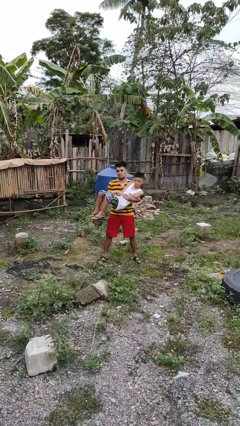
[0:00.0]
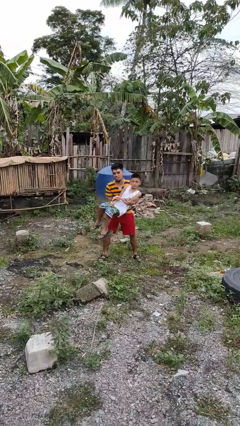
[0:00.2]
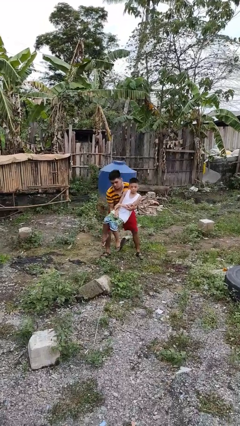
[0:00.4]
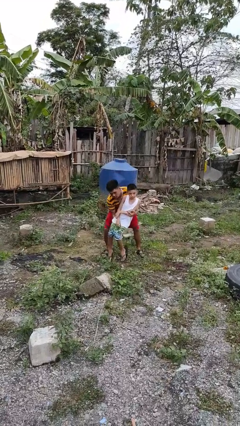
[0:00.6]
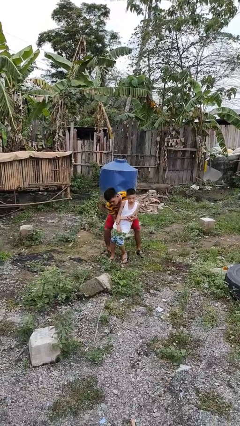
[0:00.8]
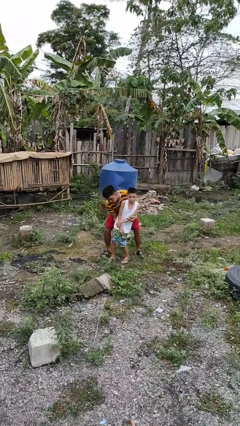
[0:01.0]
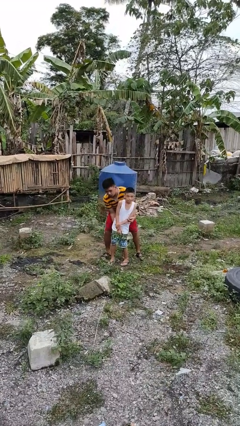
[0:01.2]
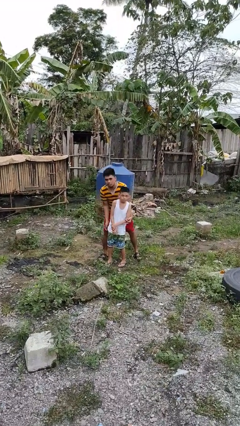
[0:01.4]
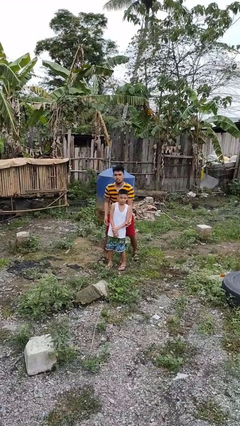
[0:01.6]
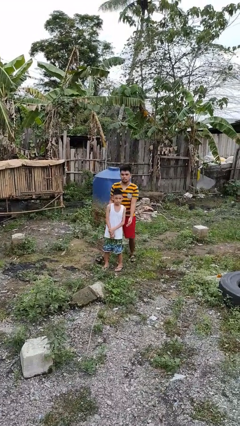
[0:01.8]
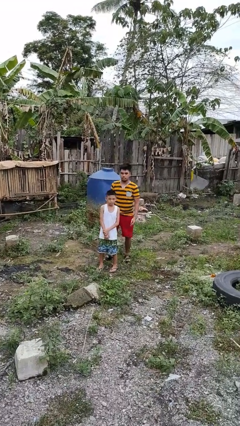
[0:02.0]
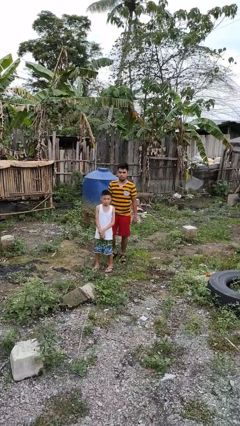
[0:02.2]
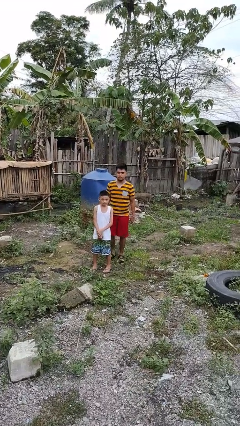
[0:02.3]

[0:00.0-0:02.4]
person puts down person

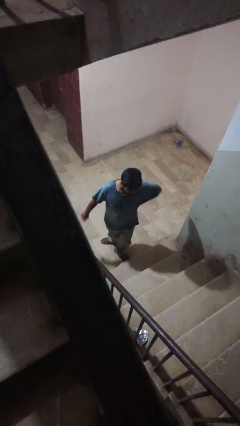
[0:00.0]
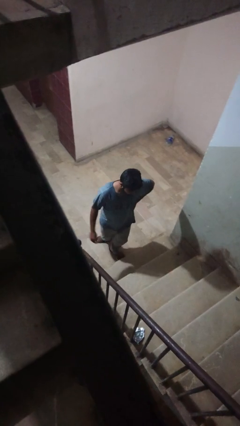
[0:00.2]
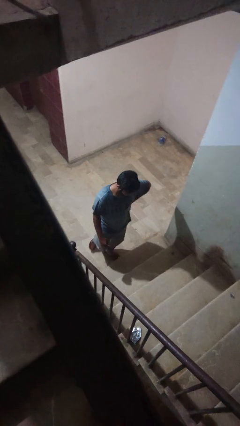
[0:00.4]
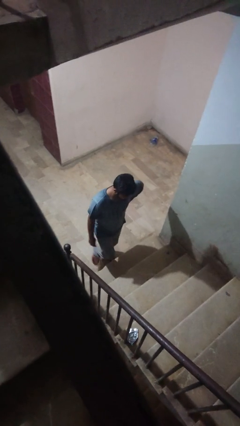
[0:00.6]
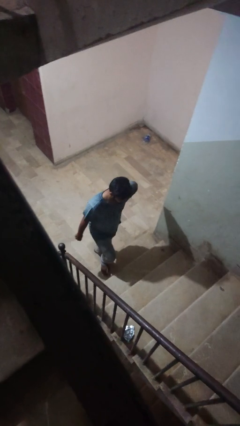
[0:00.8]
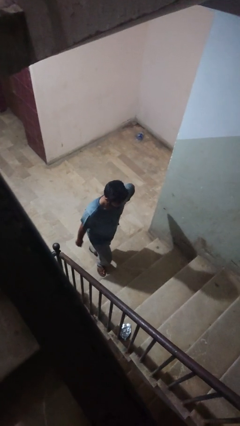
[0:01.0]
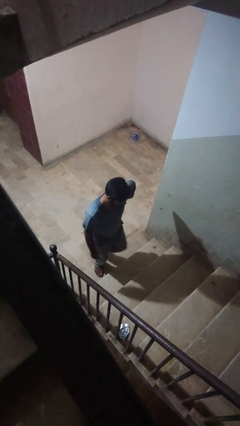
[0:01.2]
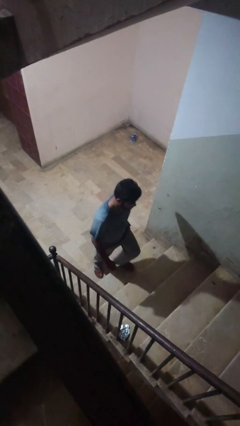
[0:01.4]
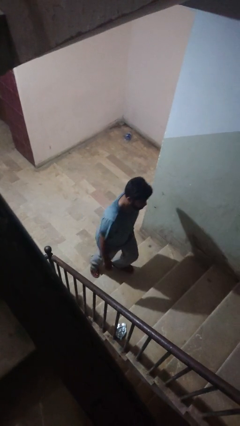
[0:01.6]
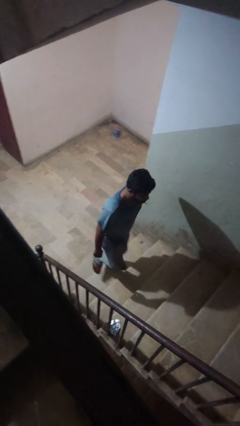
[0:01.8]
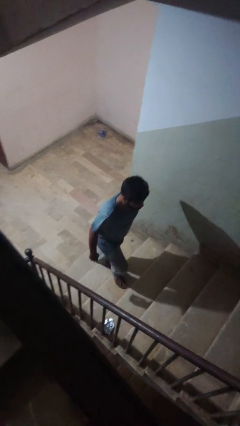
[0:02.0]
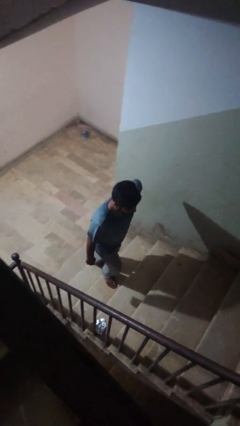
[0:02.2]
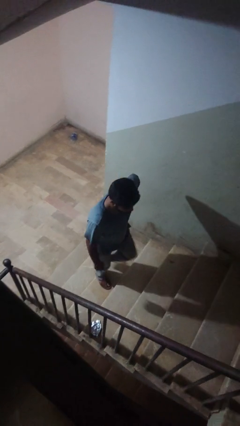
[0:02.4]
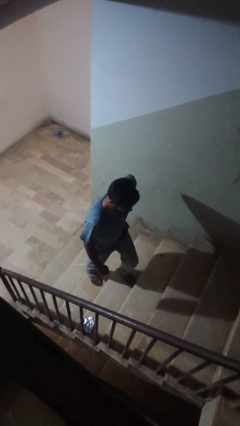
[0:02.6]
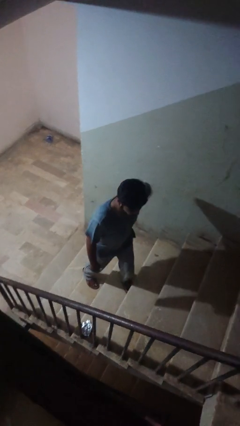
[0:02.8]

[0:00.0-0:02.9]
person climbs up stairs

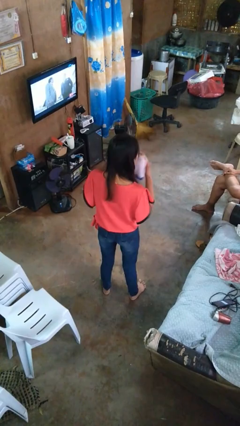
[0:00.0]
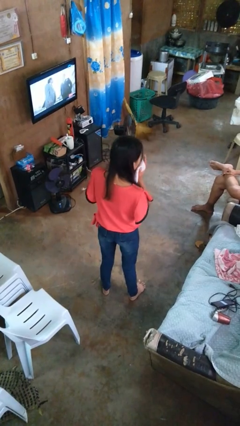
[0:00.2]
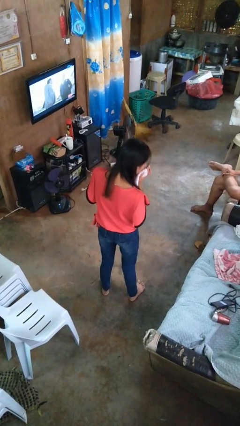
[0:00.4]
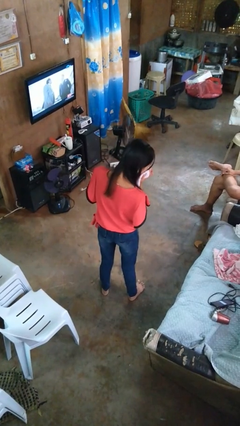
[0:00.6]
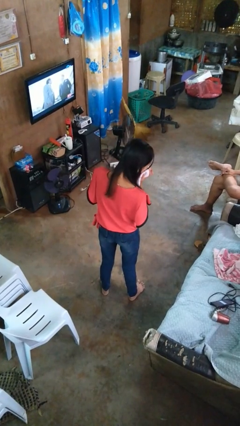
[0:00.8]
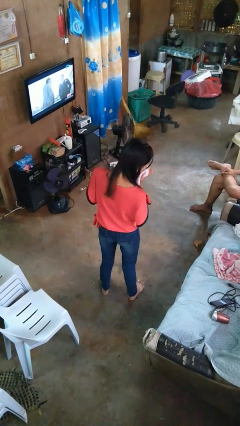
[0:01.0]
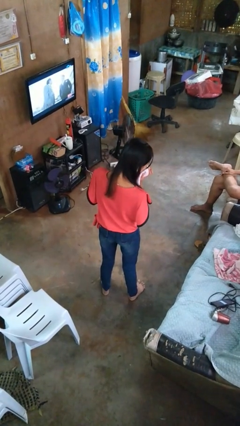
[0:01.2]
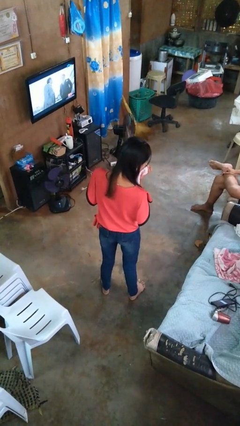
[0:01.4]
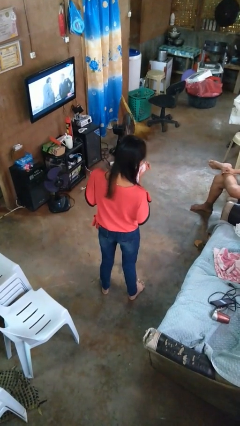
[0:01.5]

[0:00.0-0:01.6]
person blows nose

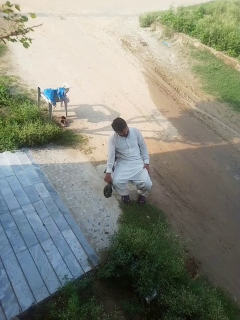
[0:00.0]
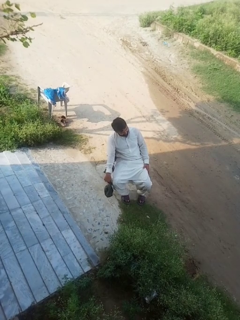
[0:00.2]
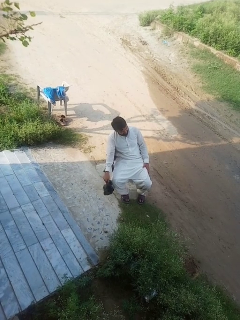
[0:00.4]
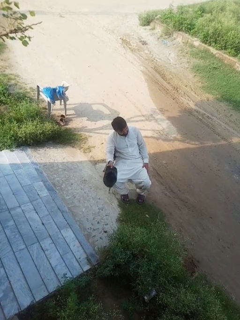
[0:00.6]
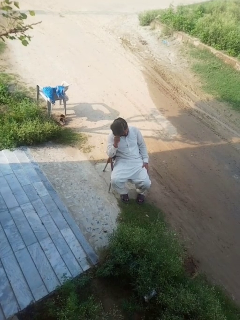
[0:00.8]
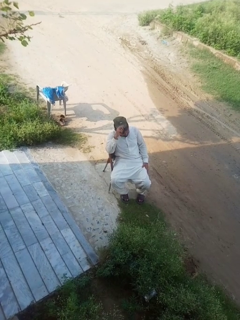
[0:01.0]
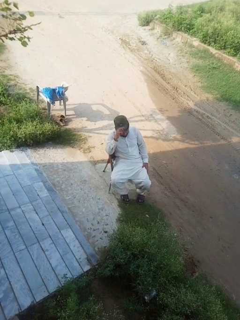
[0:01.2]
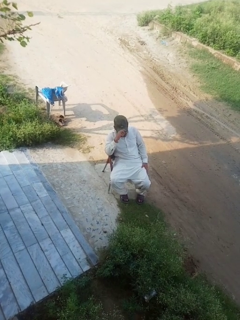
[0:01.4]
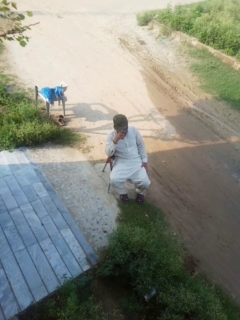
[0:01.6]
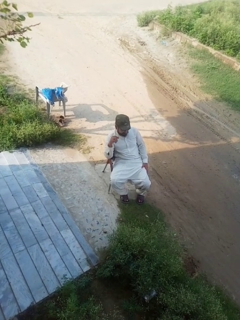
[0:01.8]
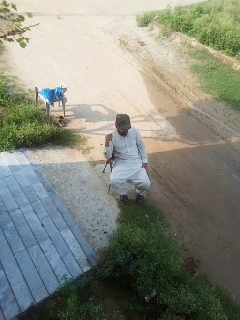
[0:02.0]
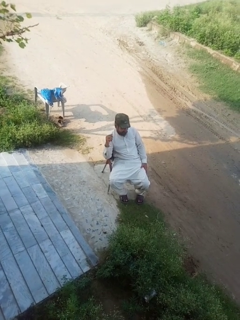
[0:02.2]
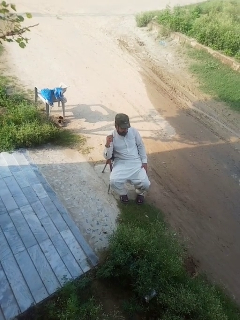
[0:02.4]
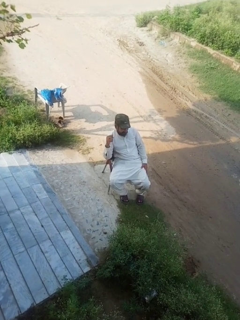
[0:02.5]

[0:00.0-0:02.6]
person puts on hat

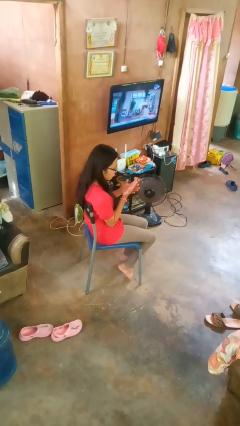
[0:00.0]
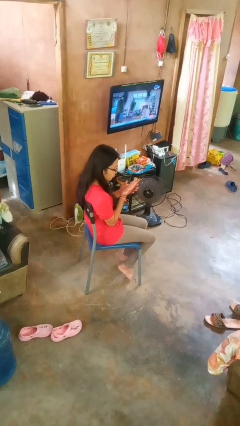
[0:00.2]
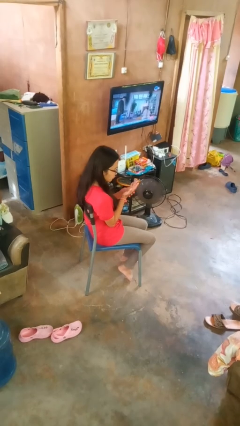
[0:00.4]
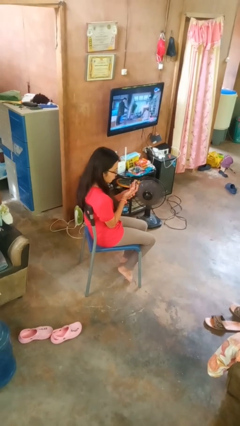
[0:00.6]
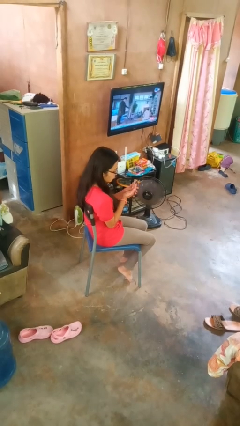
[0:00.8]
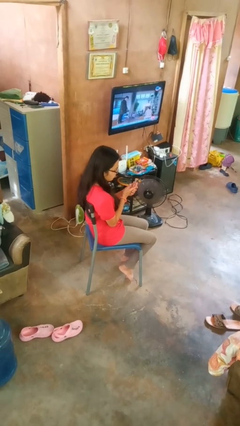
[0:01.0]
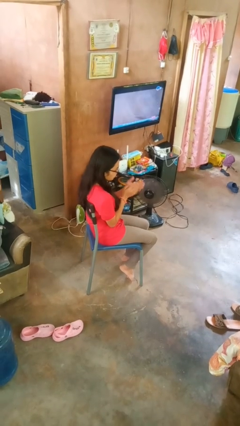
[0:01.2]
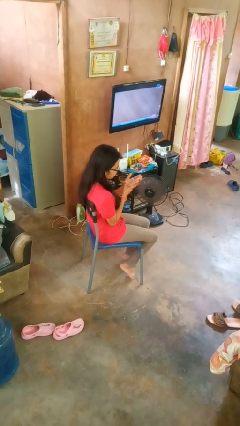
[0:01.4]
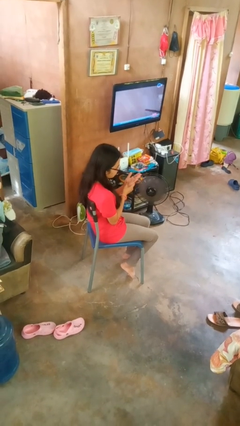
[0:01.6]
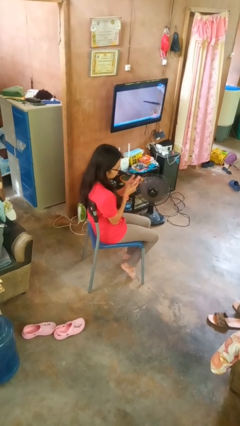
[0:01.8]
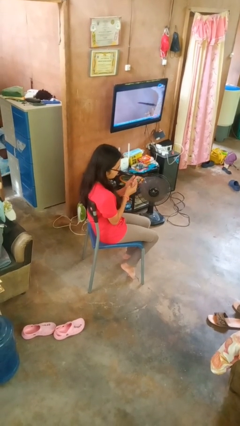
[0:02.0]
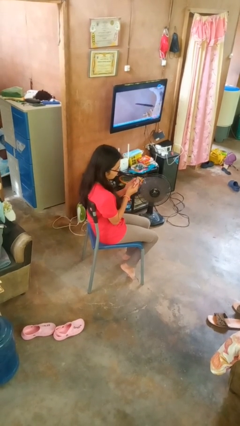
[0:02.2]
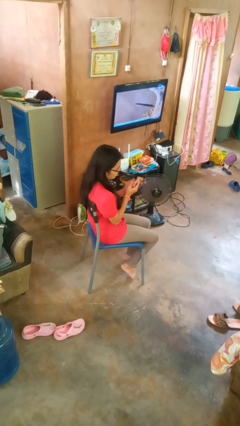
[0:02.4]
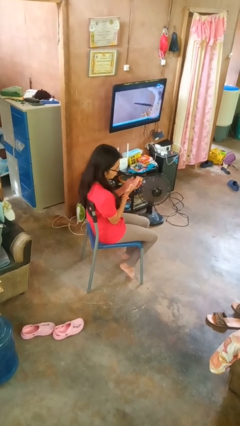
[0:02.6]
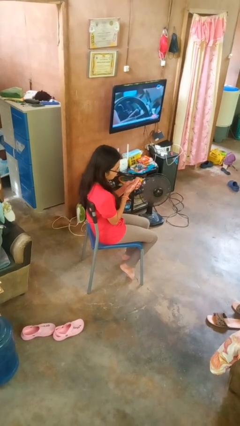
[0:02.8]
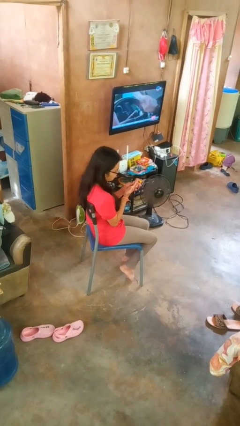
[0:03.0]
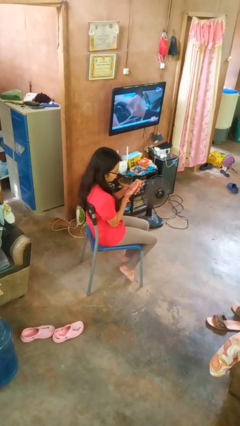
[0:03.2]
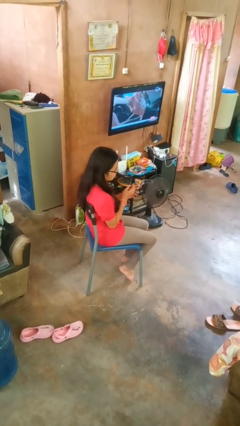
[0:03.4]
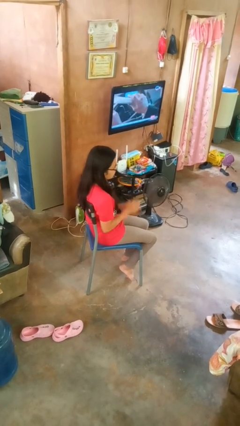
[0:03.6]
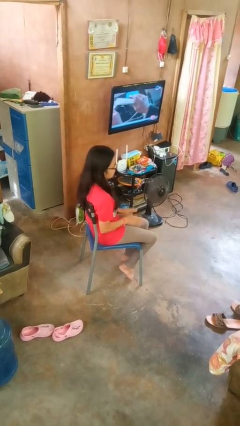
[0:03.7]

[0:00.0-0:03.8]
person looks at hands in lap

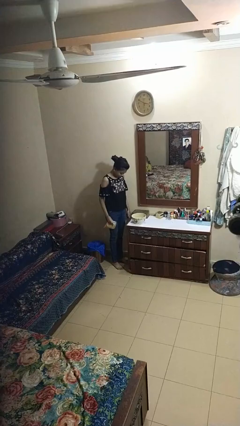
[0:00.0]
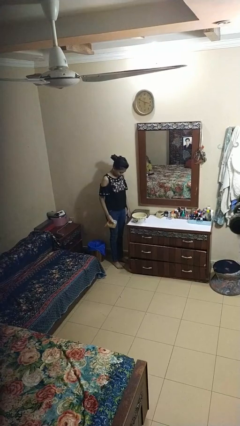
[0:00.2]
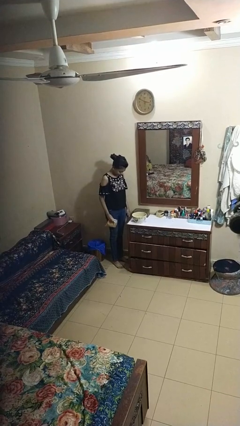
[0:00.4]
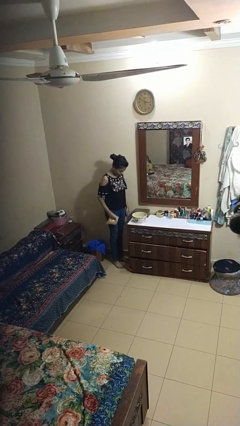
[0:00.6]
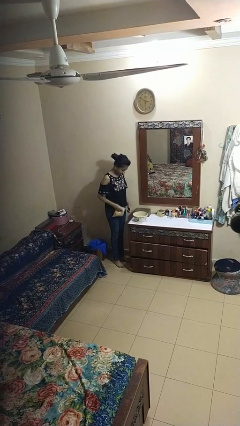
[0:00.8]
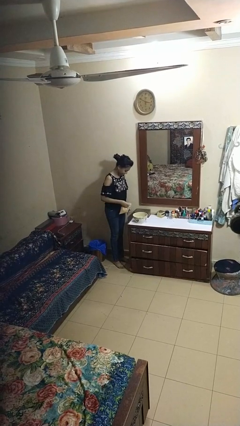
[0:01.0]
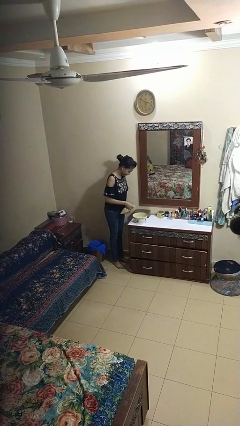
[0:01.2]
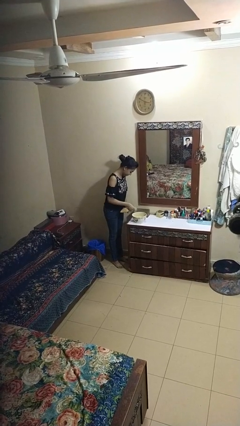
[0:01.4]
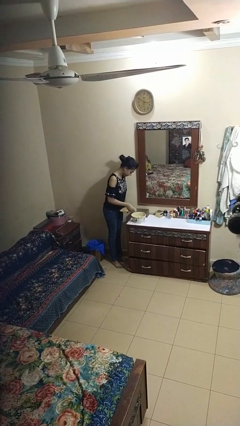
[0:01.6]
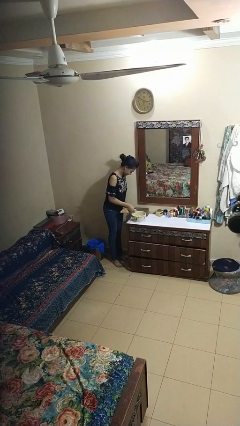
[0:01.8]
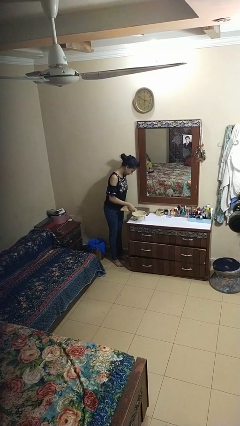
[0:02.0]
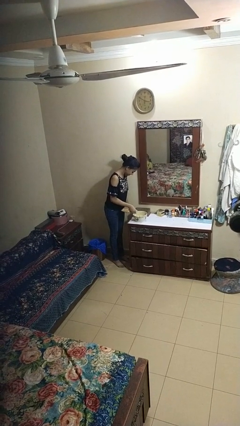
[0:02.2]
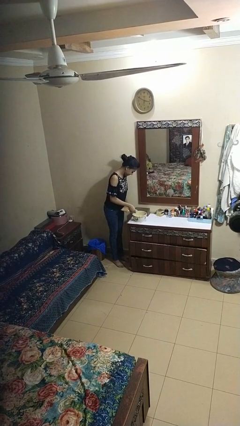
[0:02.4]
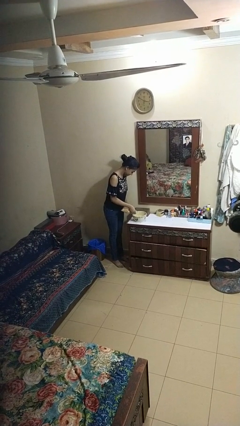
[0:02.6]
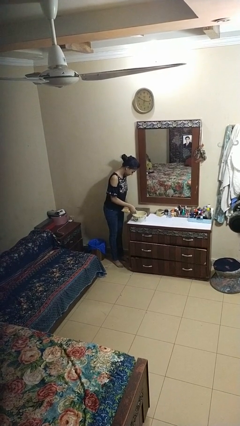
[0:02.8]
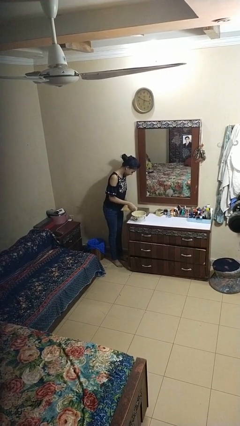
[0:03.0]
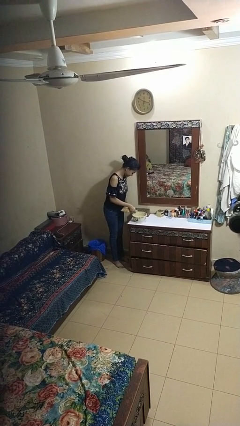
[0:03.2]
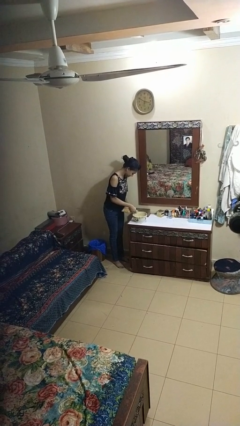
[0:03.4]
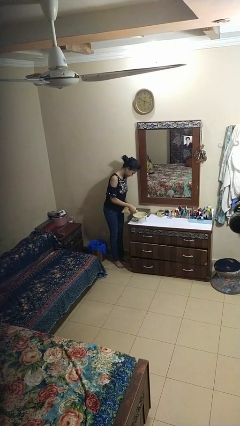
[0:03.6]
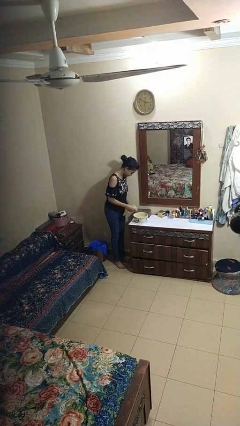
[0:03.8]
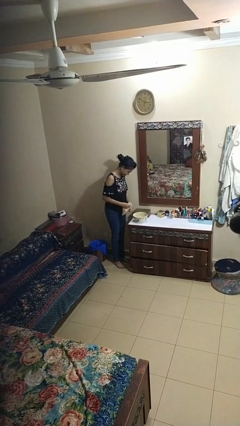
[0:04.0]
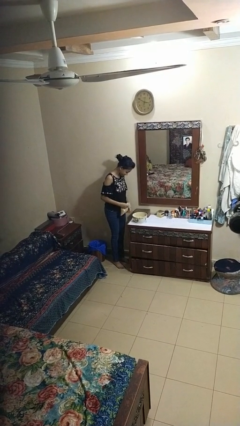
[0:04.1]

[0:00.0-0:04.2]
person pours into bowl

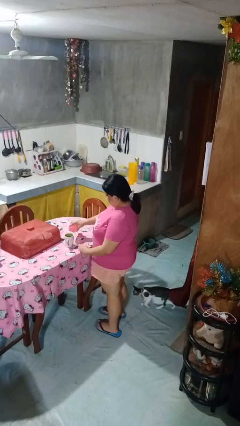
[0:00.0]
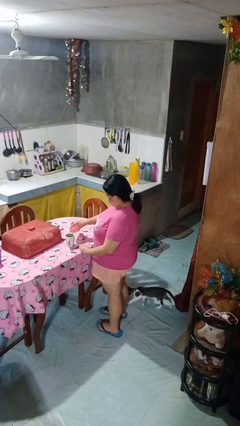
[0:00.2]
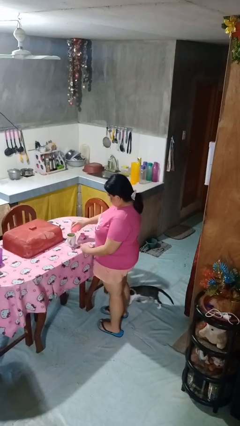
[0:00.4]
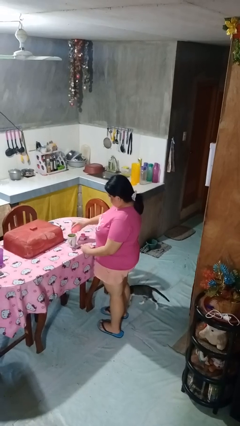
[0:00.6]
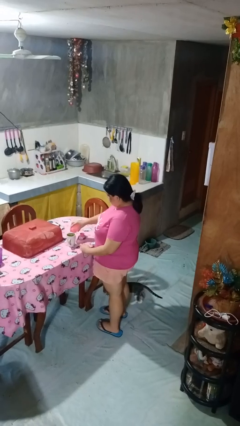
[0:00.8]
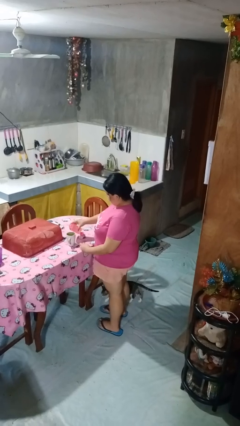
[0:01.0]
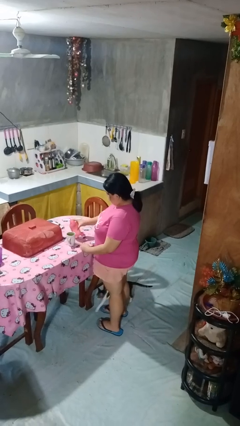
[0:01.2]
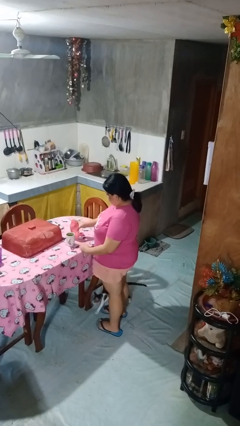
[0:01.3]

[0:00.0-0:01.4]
person pours liquid into cup
